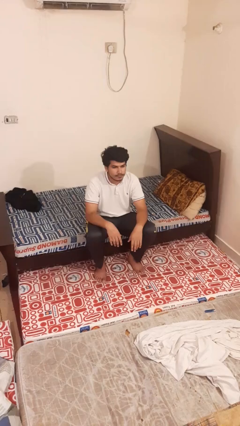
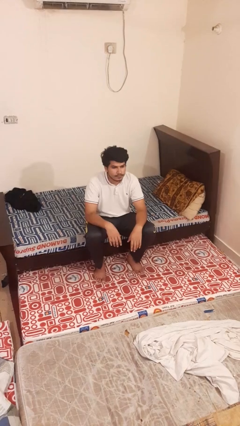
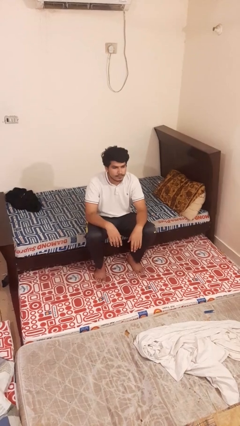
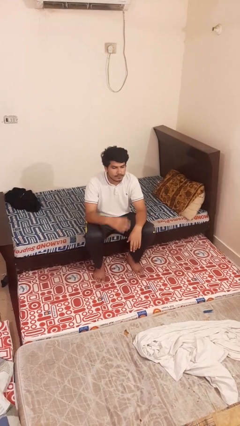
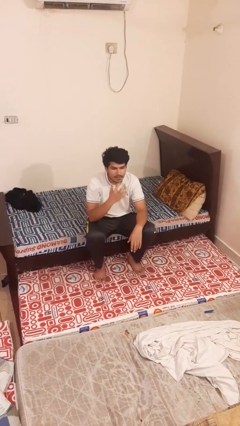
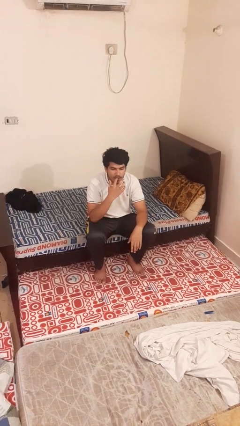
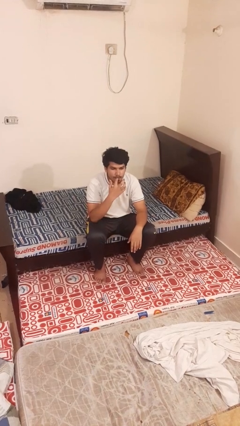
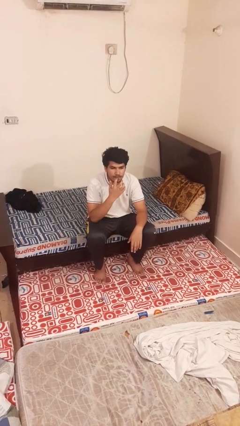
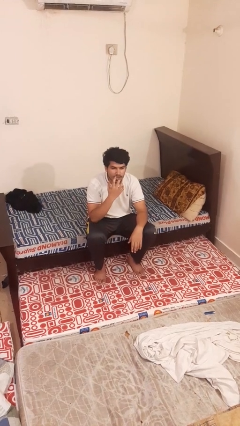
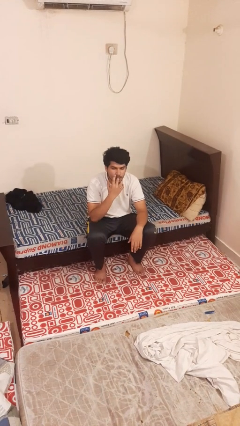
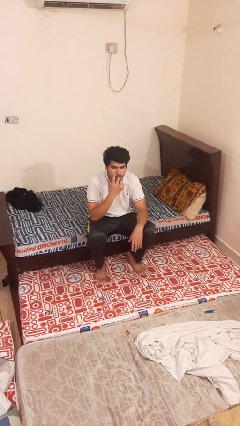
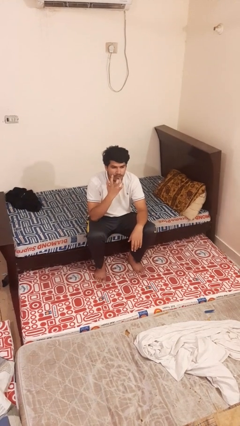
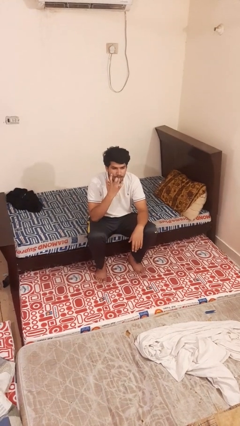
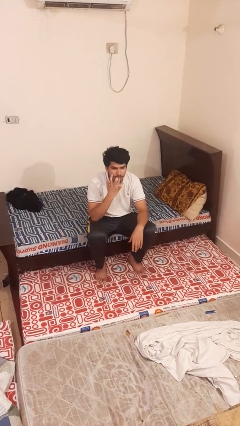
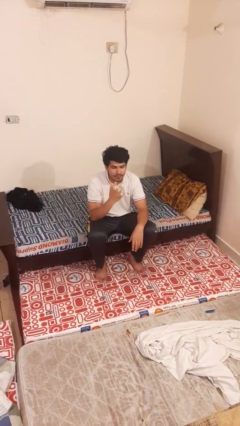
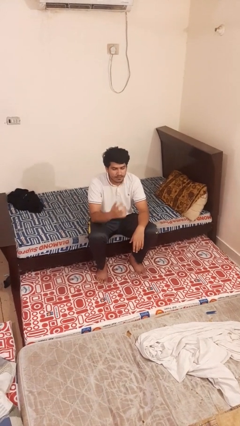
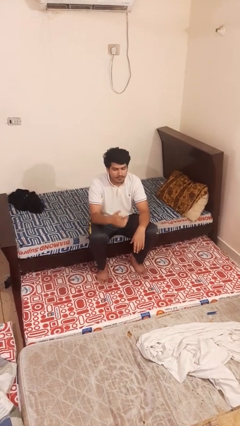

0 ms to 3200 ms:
person licks fingers

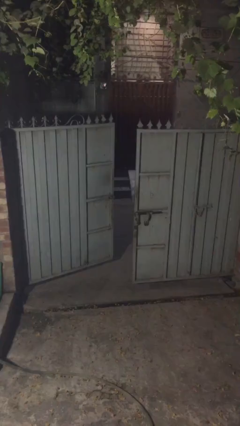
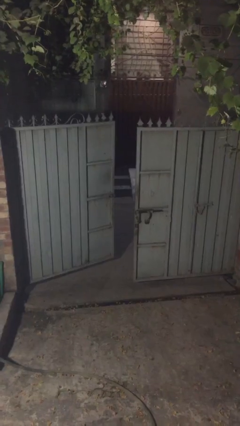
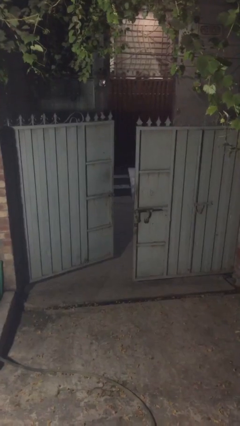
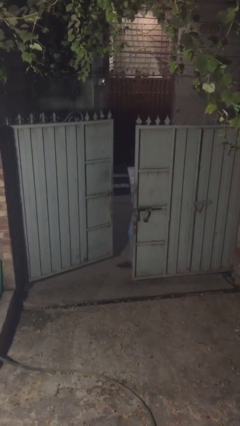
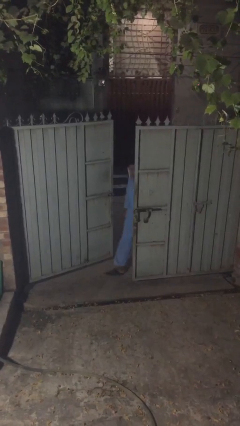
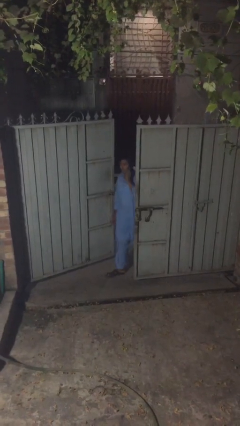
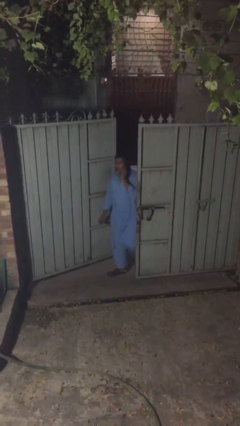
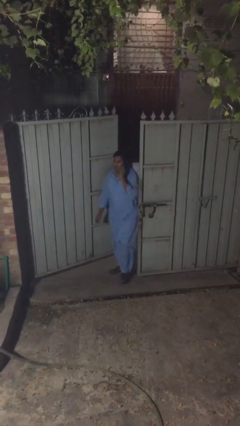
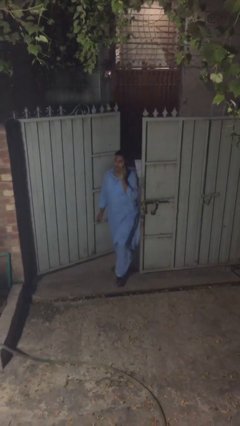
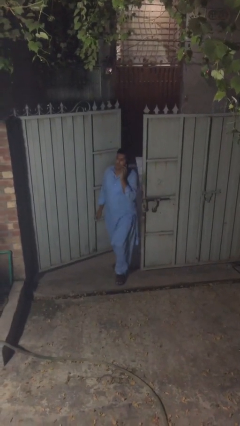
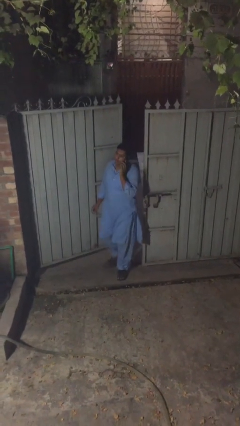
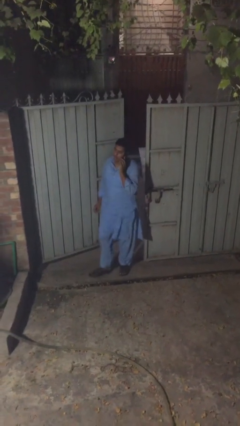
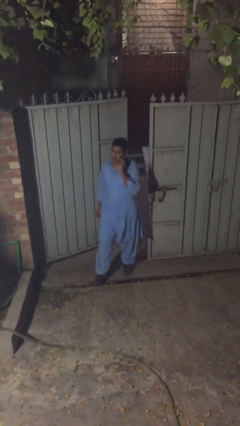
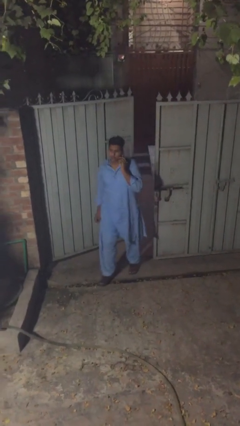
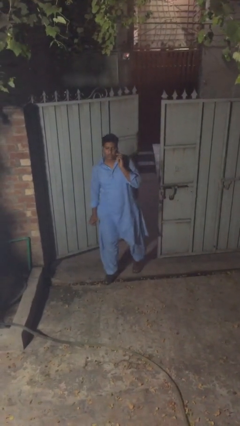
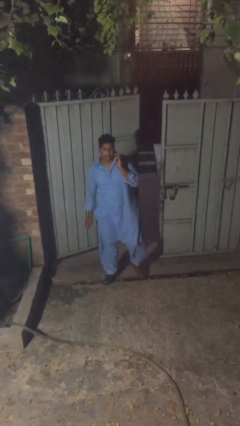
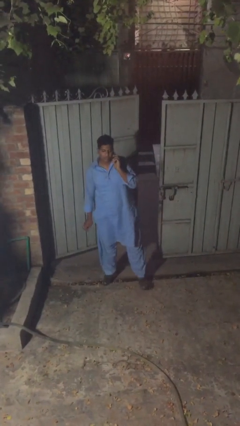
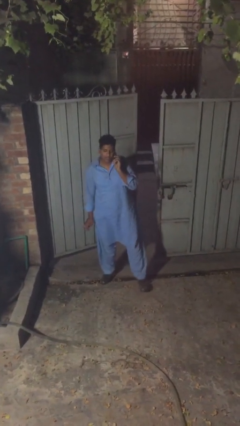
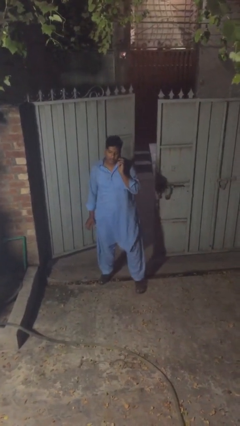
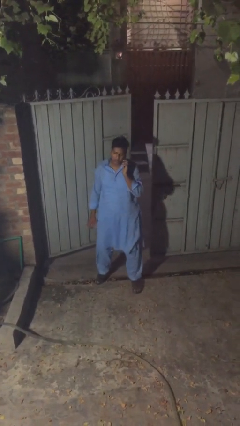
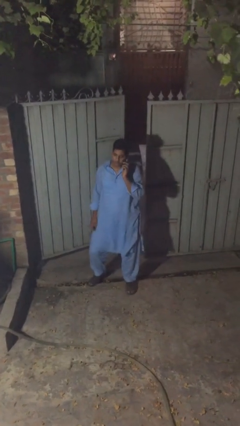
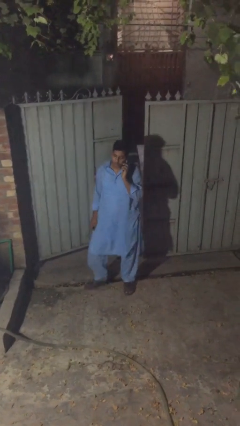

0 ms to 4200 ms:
person enters scene through structure

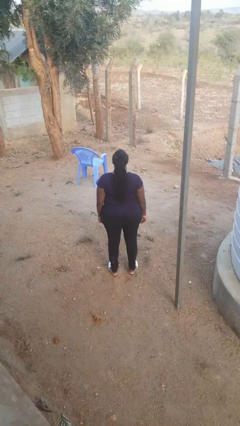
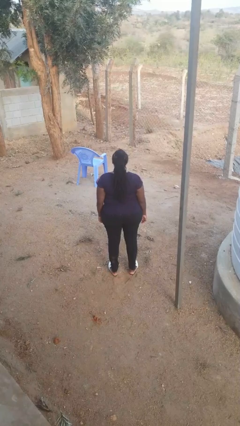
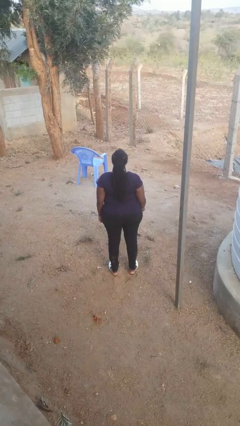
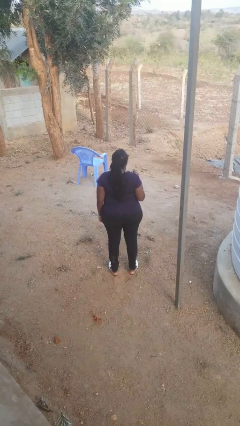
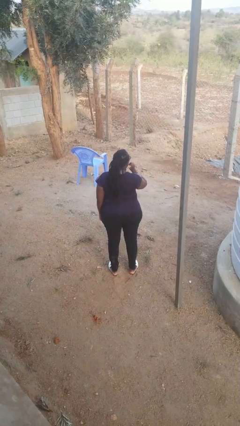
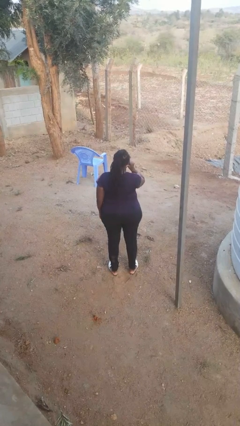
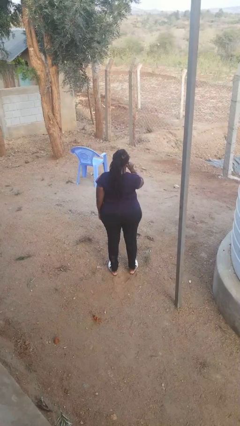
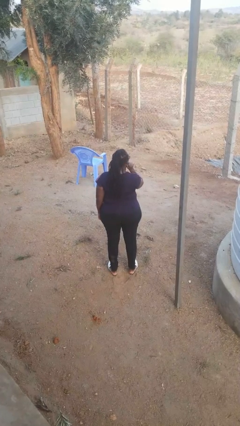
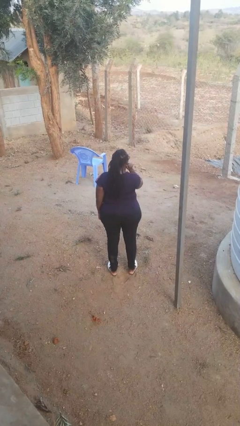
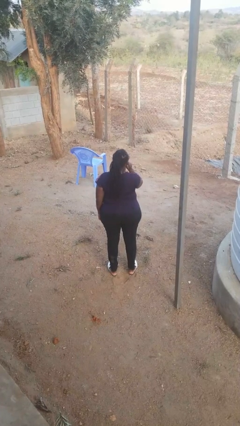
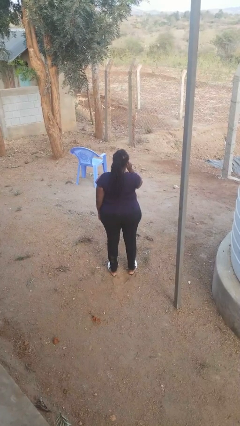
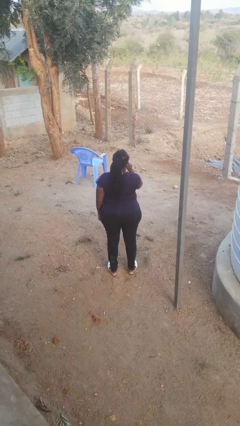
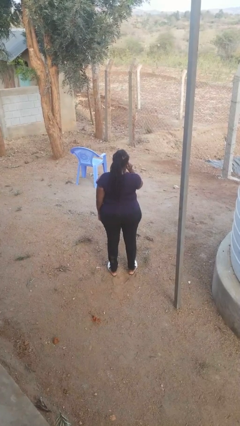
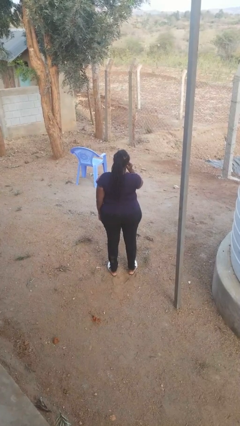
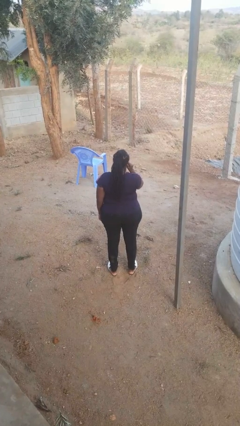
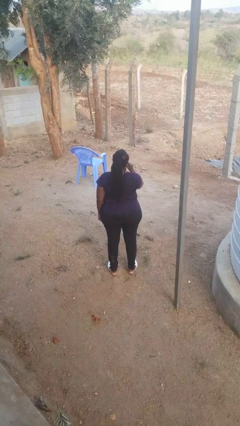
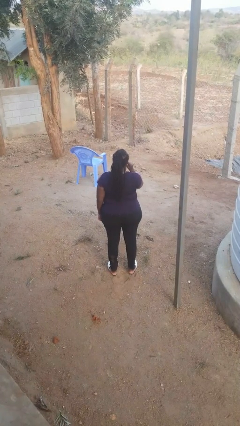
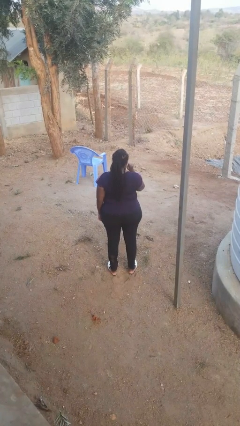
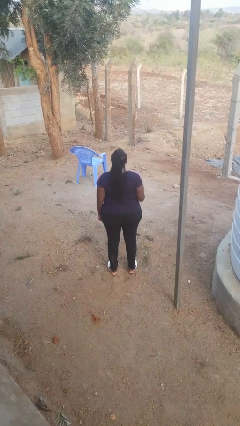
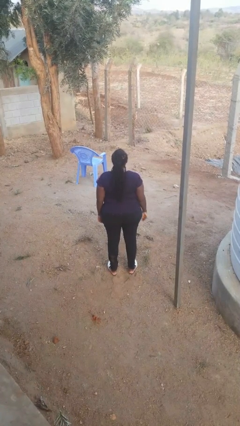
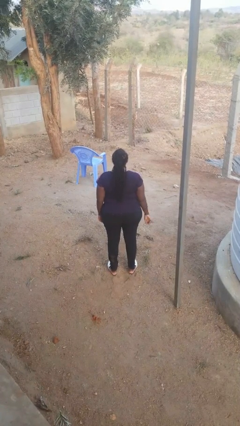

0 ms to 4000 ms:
person touches earlobe

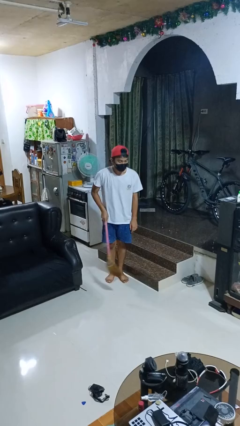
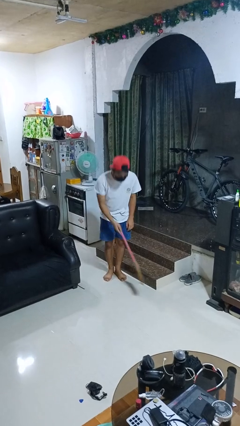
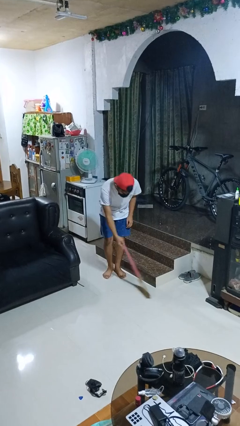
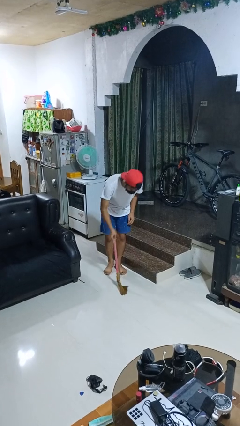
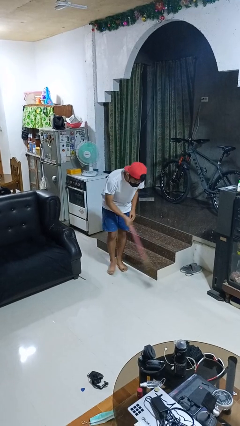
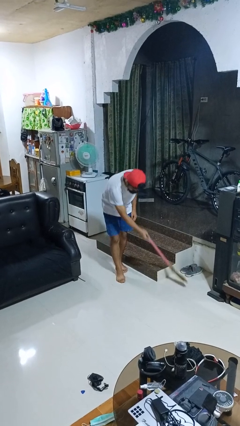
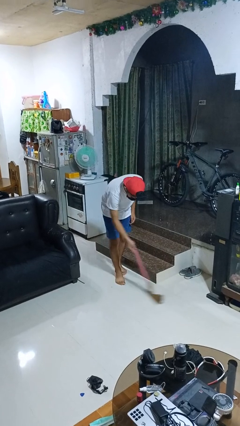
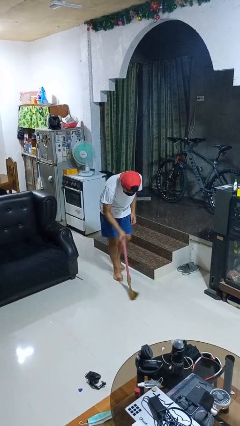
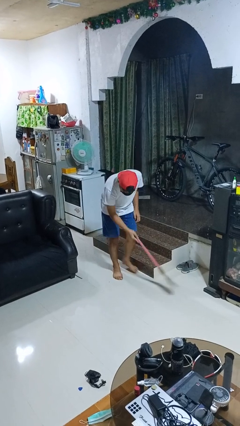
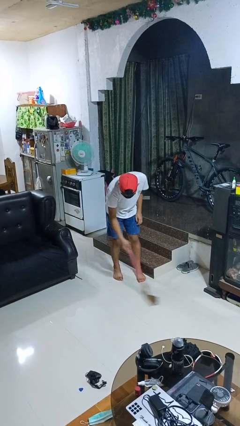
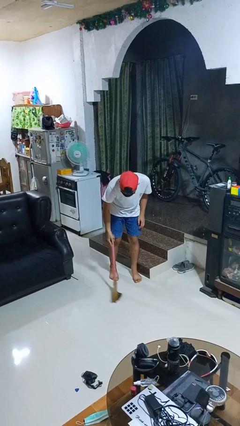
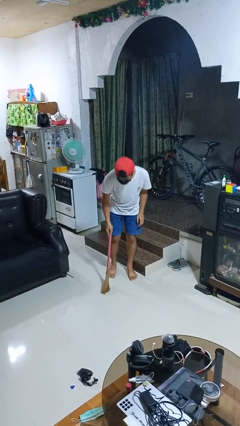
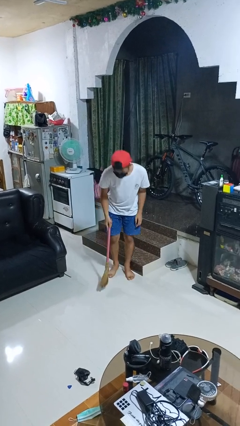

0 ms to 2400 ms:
person sweeps floor

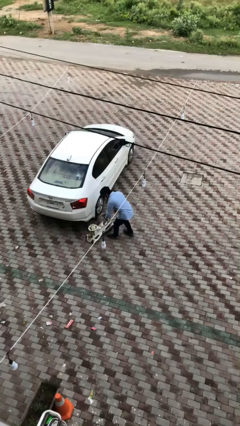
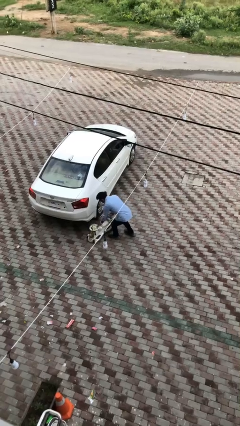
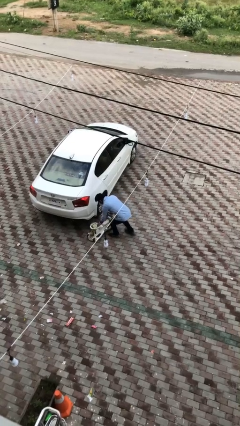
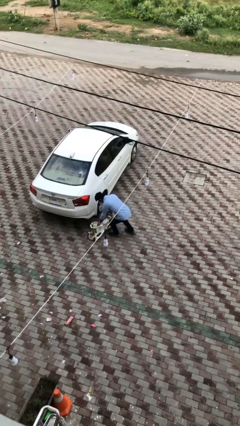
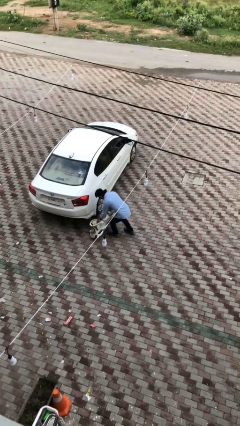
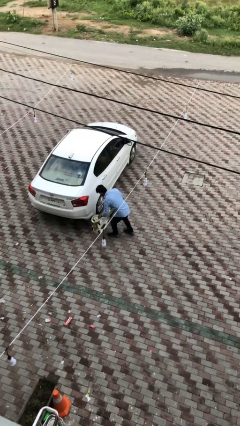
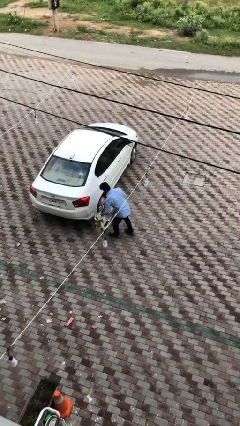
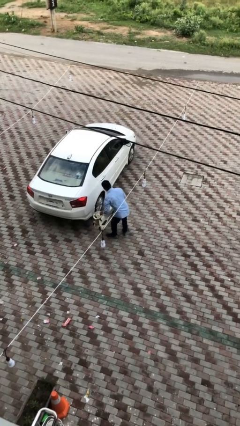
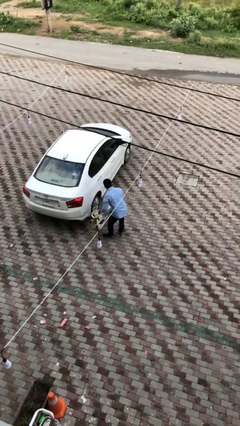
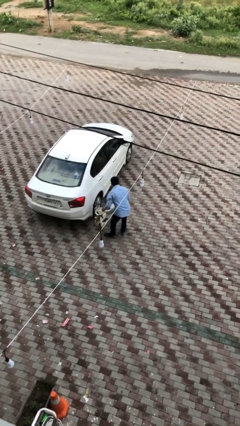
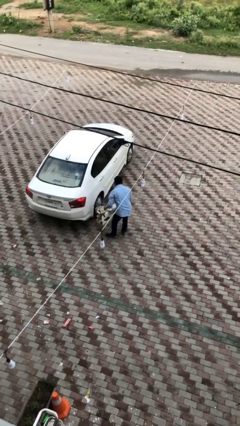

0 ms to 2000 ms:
person picks up object from floor

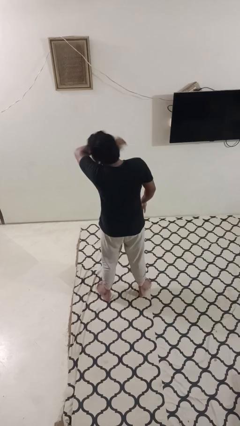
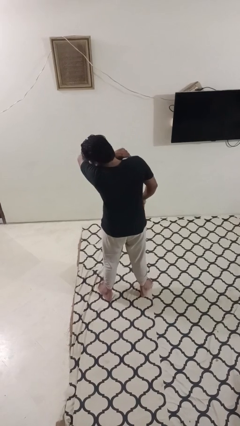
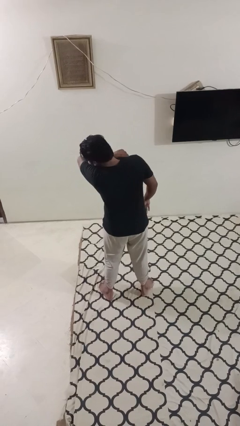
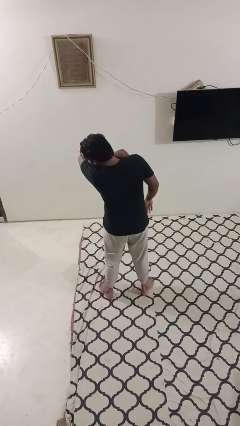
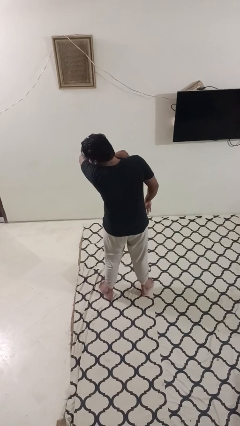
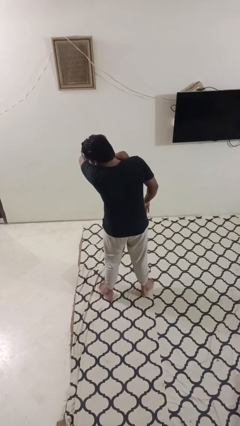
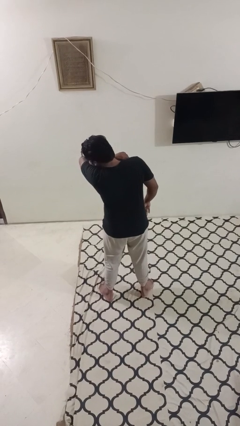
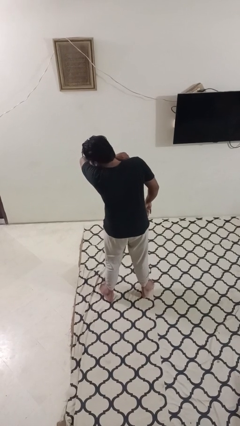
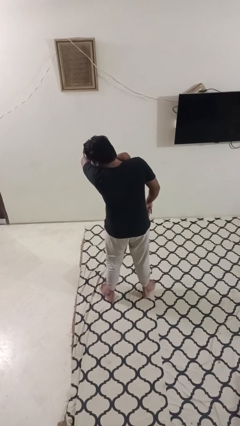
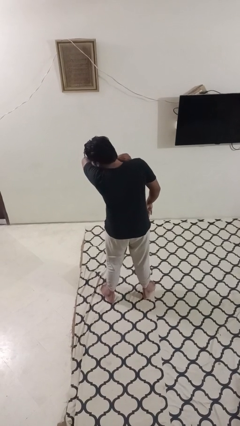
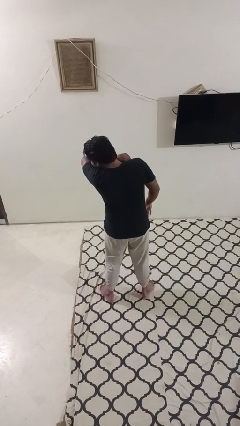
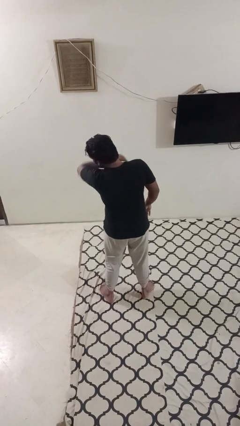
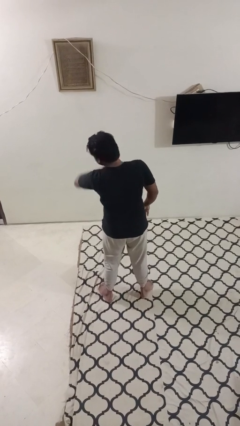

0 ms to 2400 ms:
person sneezes into arm
